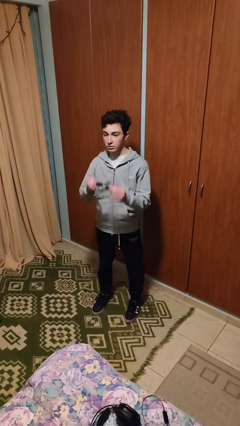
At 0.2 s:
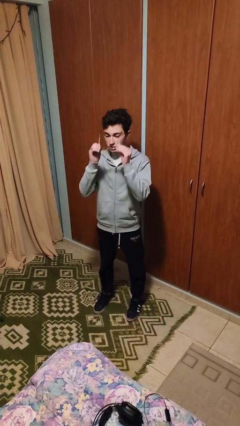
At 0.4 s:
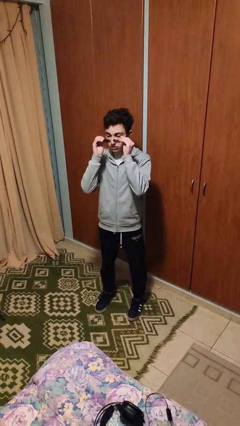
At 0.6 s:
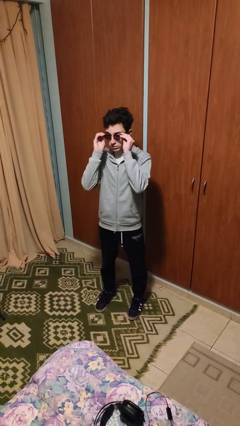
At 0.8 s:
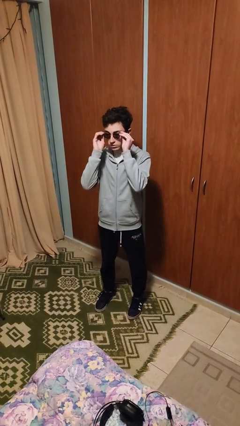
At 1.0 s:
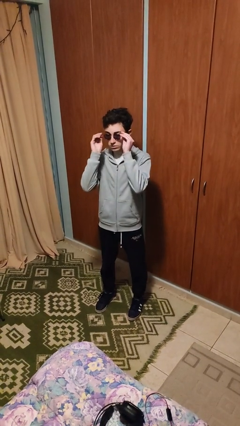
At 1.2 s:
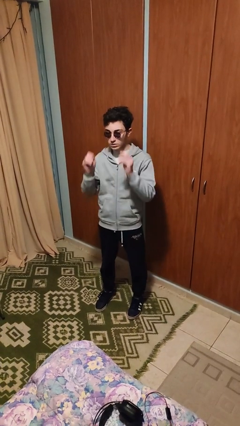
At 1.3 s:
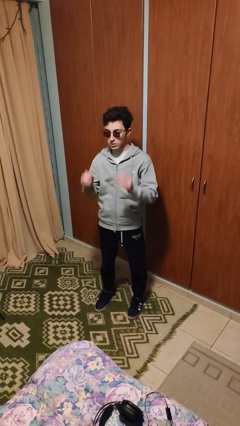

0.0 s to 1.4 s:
person puts on glasses

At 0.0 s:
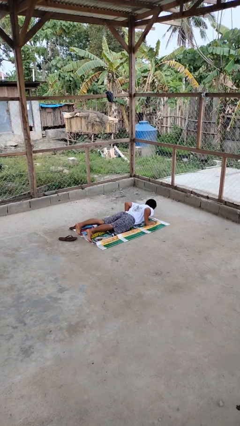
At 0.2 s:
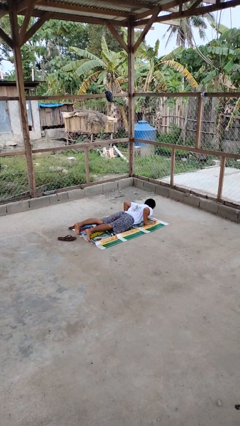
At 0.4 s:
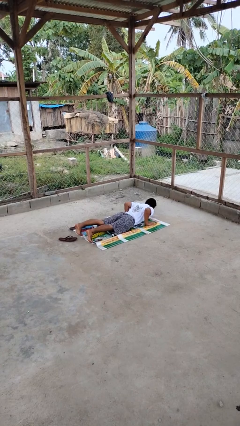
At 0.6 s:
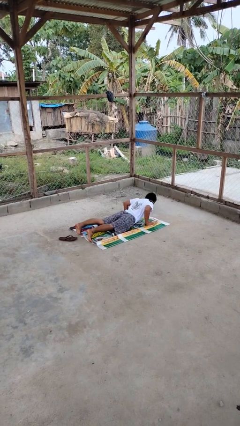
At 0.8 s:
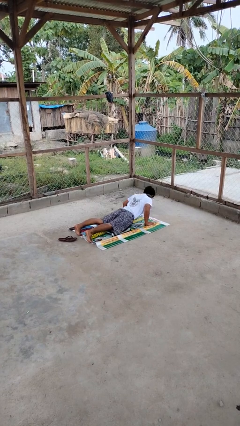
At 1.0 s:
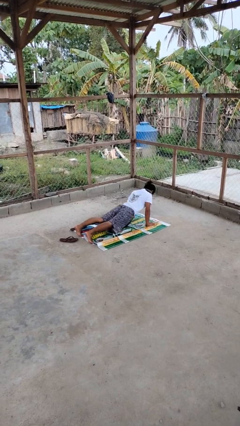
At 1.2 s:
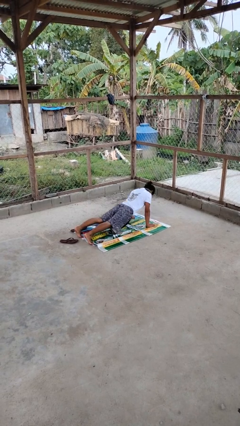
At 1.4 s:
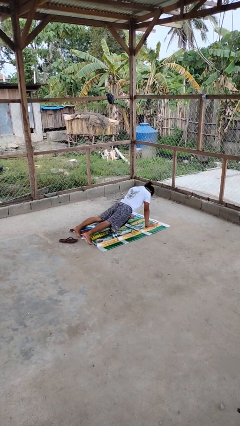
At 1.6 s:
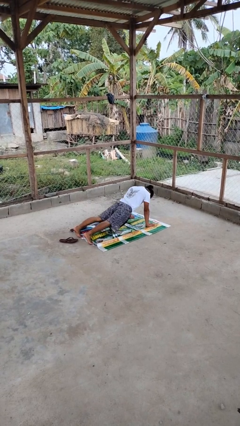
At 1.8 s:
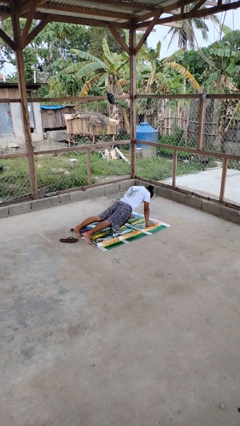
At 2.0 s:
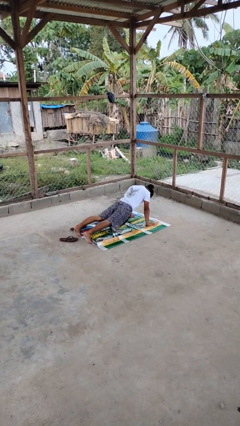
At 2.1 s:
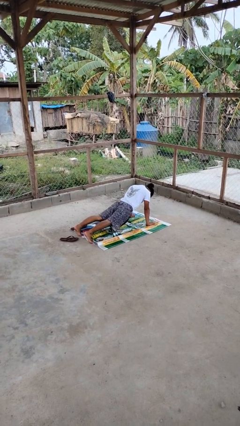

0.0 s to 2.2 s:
person exercises with pushup

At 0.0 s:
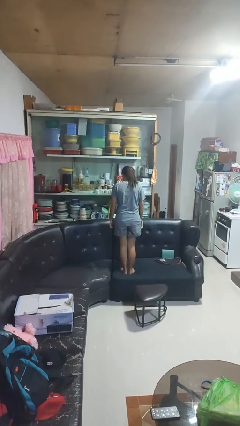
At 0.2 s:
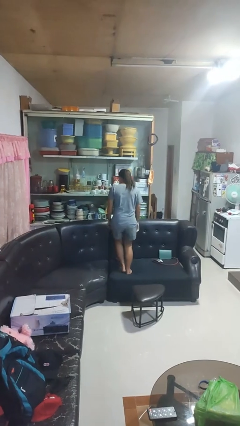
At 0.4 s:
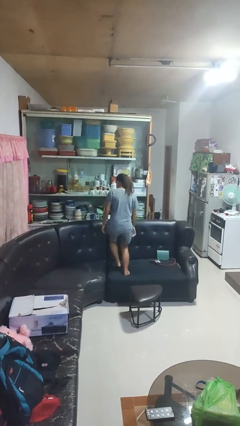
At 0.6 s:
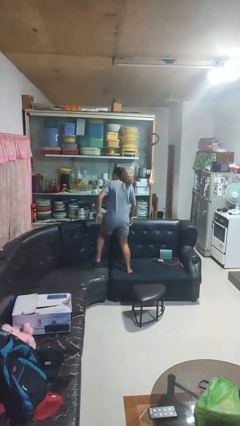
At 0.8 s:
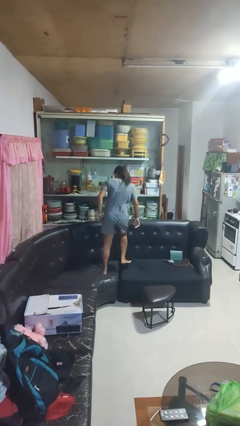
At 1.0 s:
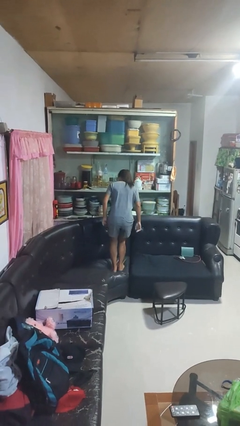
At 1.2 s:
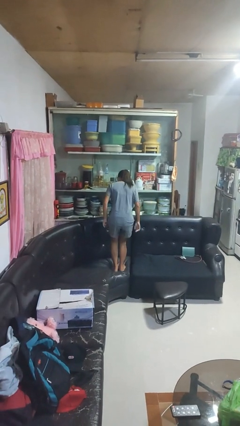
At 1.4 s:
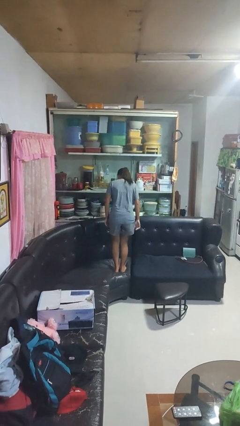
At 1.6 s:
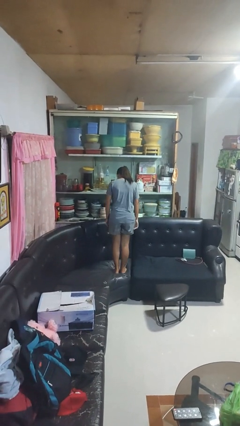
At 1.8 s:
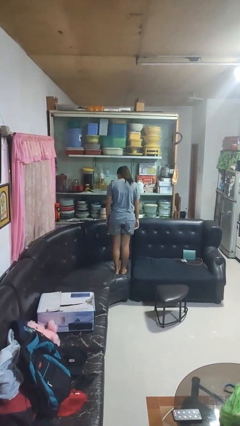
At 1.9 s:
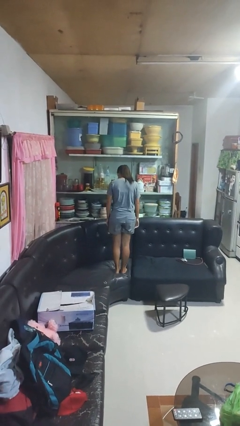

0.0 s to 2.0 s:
person jumps on couch

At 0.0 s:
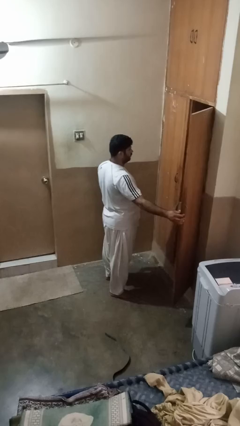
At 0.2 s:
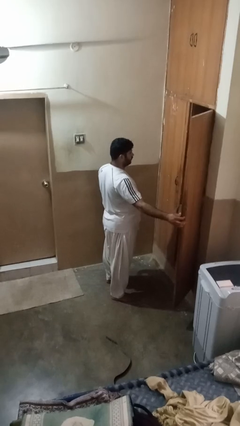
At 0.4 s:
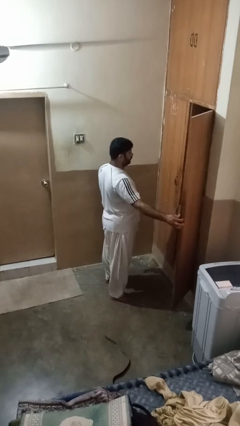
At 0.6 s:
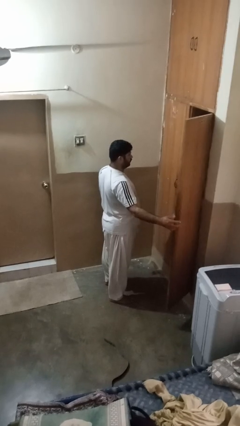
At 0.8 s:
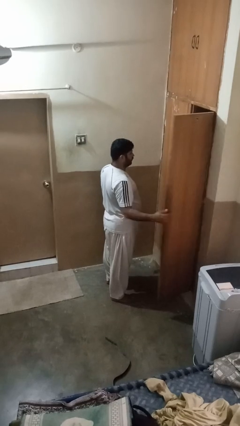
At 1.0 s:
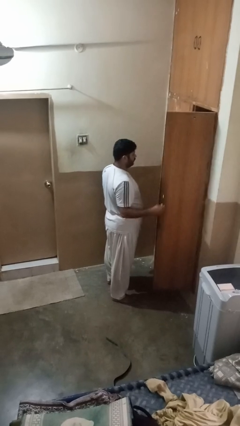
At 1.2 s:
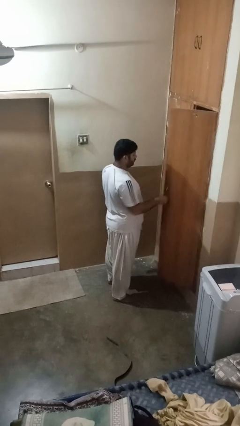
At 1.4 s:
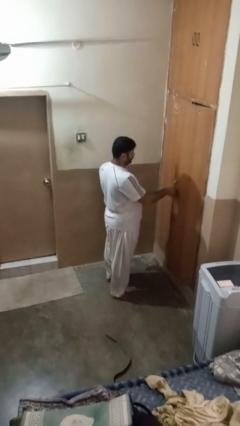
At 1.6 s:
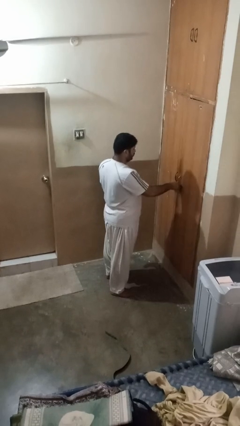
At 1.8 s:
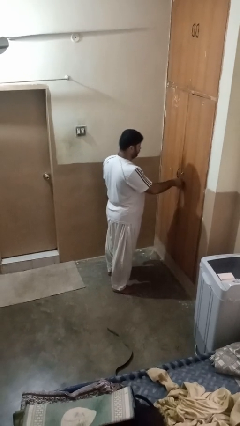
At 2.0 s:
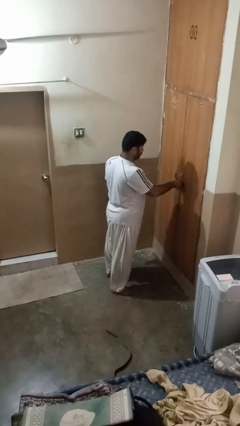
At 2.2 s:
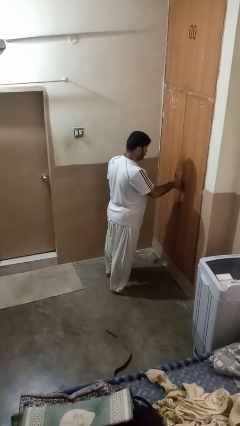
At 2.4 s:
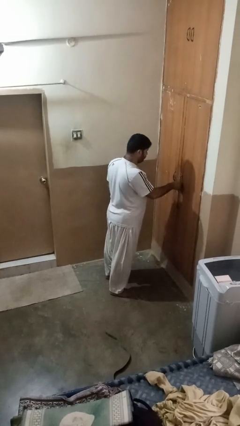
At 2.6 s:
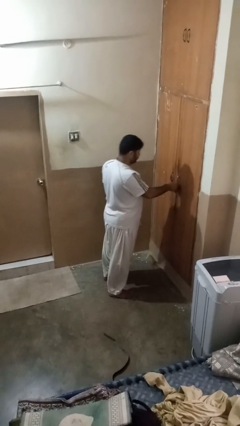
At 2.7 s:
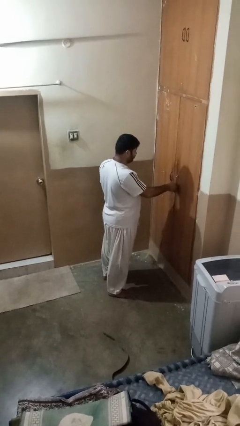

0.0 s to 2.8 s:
person closes closet door

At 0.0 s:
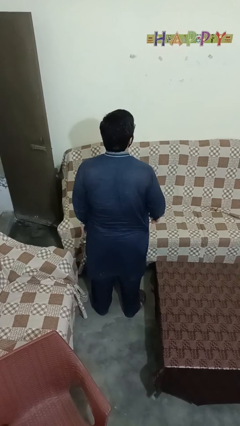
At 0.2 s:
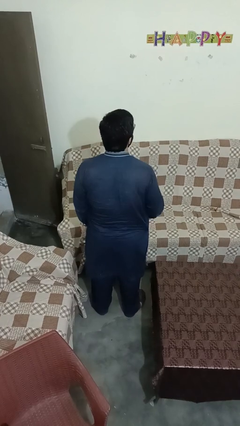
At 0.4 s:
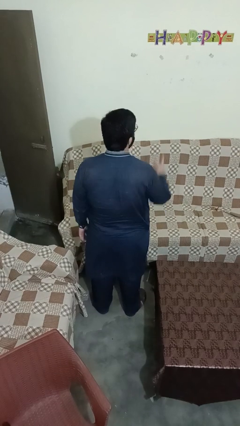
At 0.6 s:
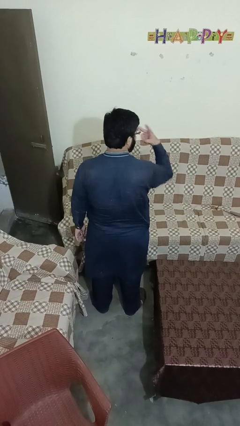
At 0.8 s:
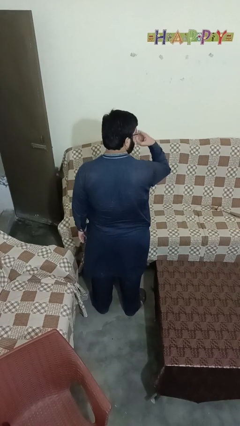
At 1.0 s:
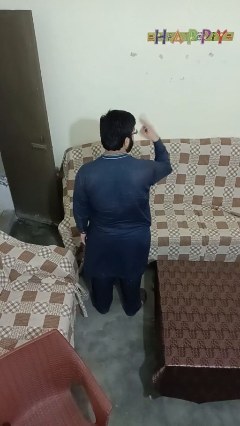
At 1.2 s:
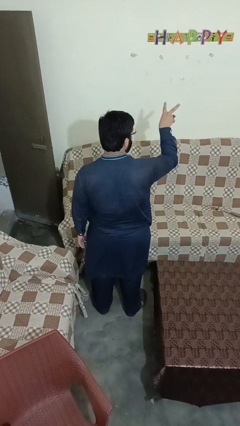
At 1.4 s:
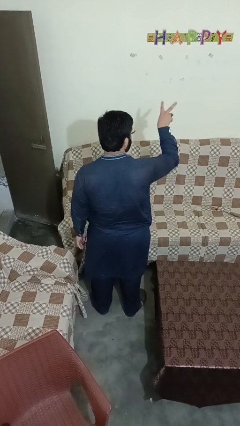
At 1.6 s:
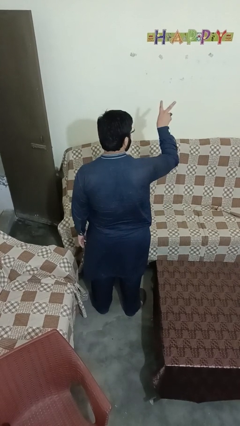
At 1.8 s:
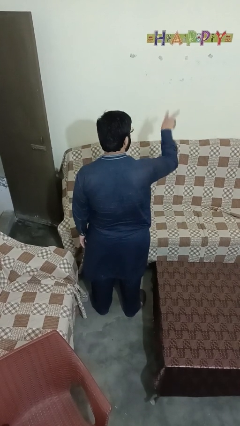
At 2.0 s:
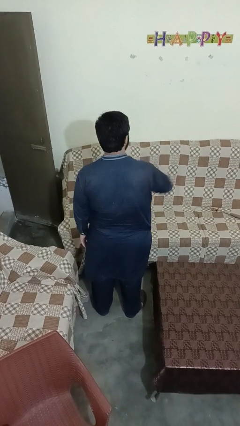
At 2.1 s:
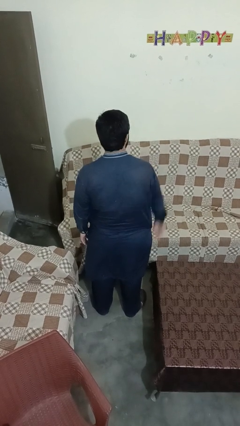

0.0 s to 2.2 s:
person gestures watch closely

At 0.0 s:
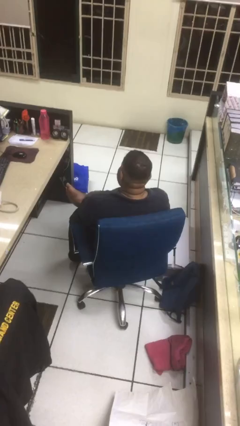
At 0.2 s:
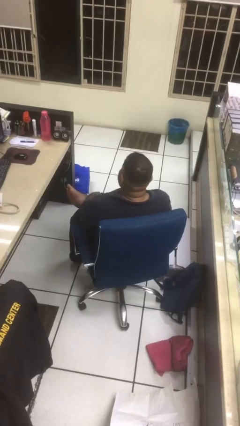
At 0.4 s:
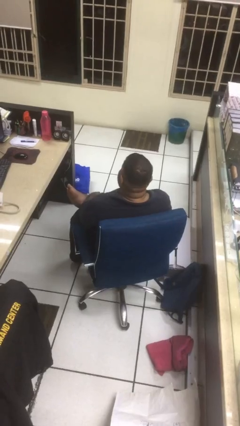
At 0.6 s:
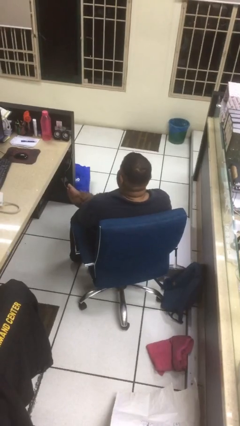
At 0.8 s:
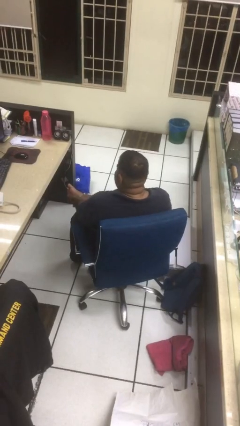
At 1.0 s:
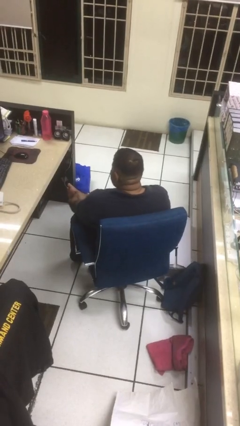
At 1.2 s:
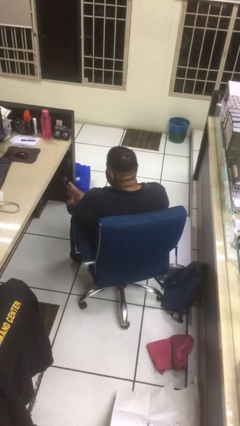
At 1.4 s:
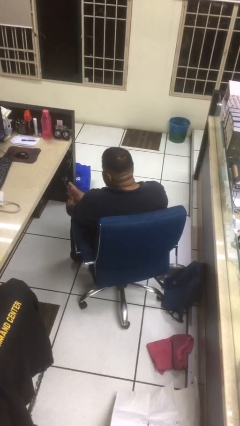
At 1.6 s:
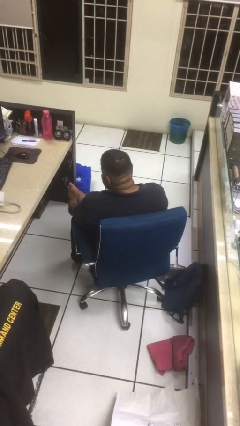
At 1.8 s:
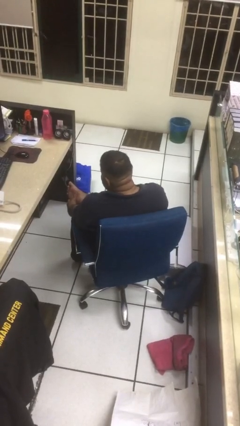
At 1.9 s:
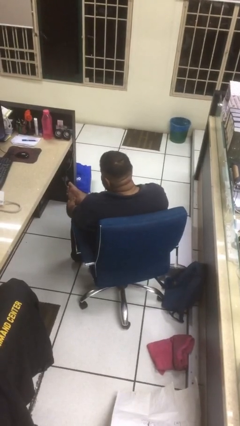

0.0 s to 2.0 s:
person rubs foot

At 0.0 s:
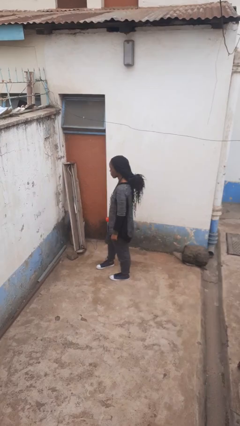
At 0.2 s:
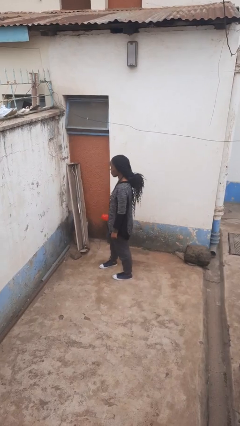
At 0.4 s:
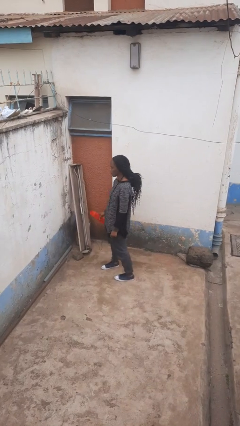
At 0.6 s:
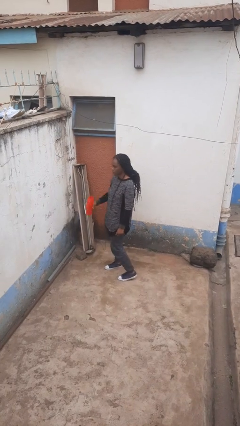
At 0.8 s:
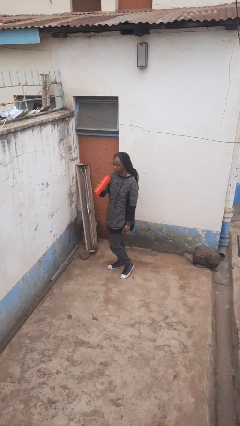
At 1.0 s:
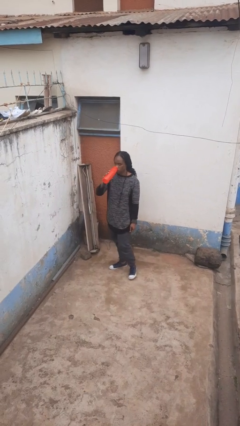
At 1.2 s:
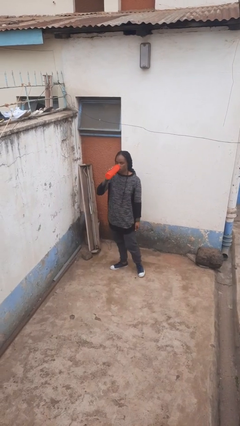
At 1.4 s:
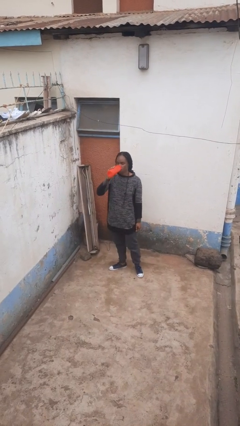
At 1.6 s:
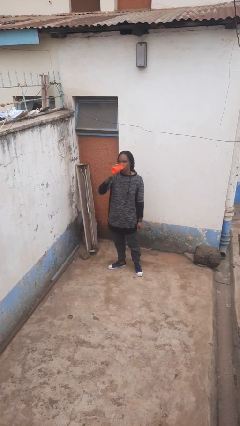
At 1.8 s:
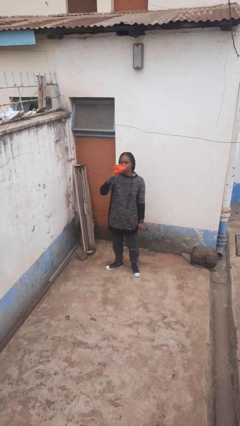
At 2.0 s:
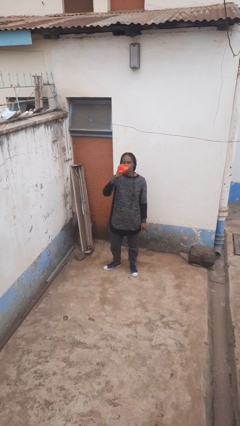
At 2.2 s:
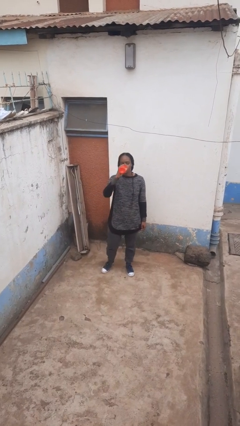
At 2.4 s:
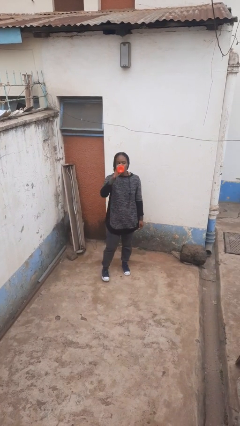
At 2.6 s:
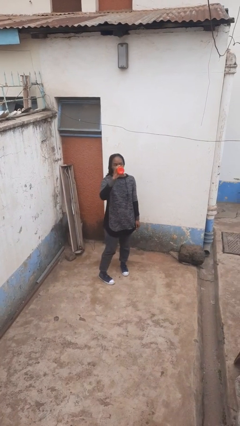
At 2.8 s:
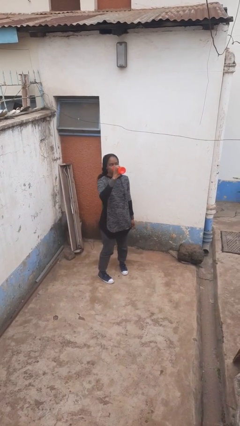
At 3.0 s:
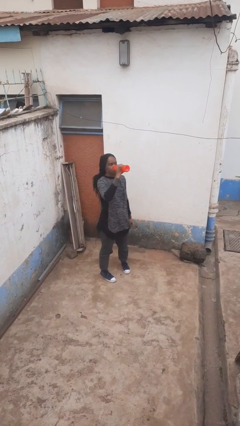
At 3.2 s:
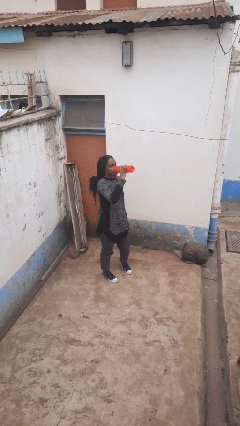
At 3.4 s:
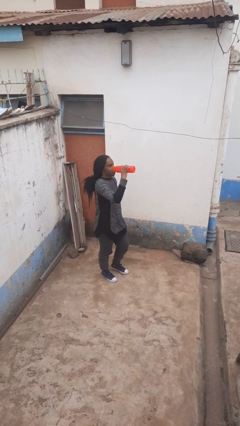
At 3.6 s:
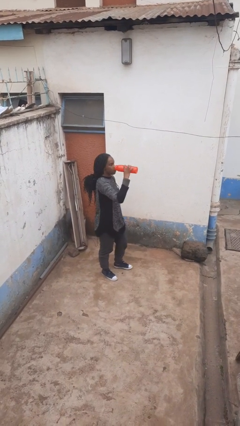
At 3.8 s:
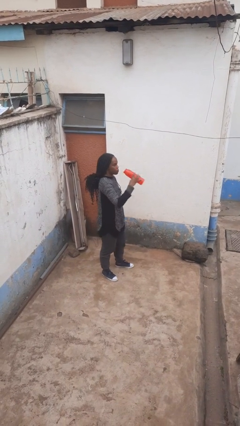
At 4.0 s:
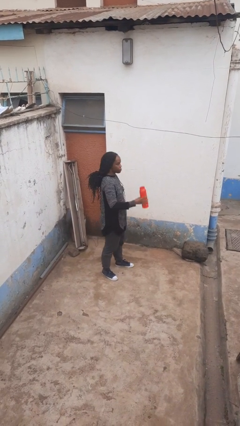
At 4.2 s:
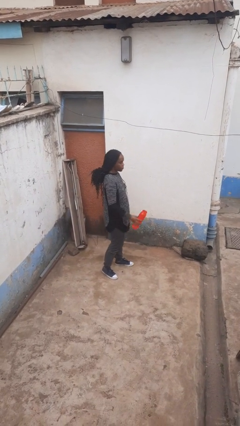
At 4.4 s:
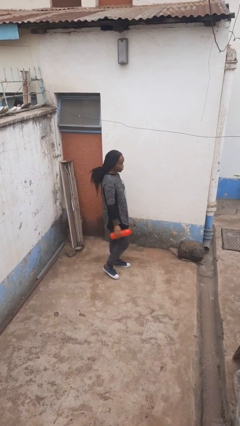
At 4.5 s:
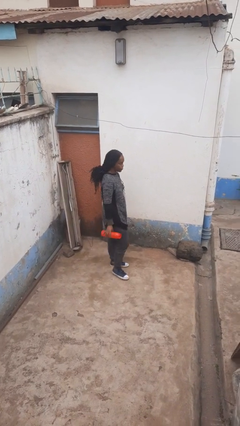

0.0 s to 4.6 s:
person drinks from bottle

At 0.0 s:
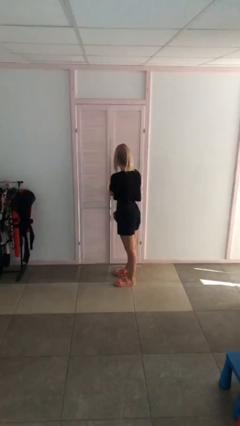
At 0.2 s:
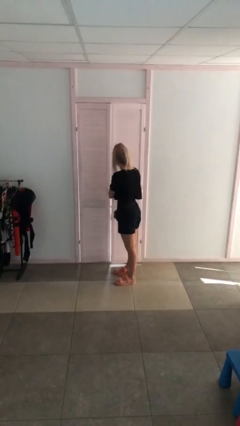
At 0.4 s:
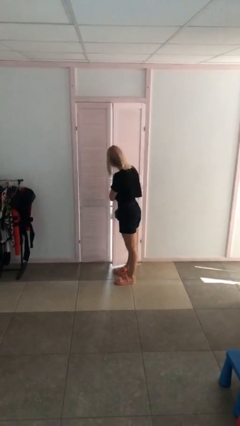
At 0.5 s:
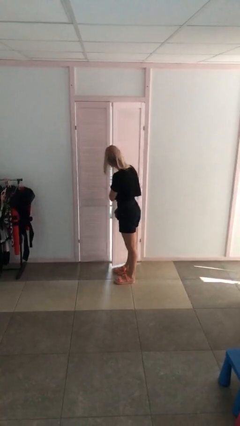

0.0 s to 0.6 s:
person opens facility door
